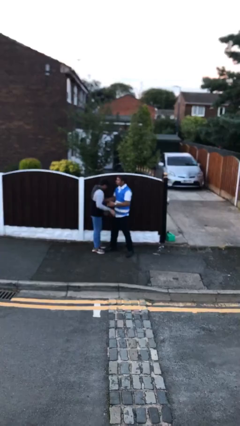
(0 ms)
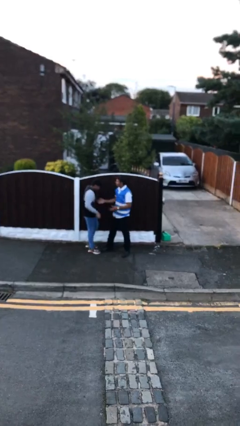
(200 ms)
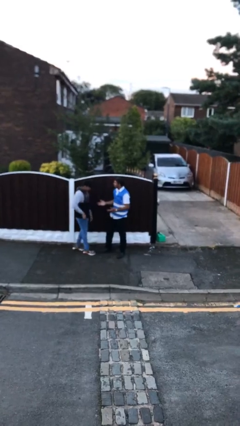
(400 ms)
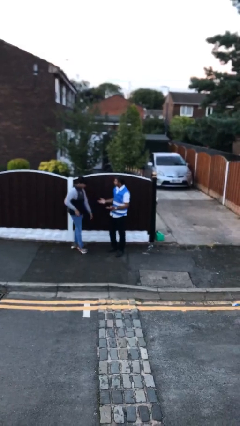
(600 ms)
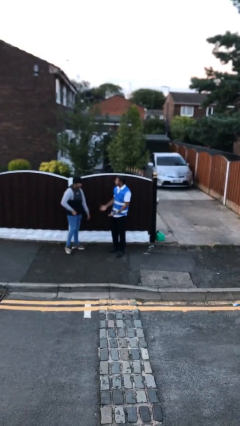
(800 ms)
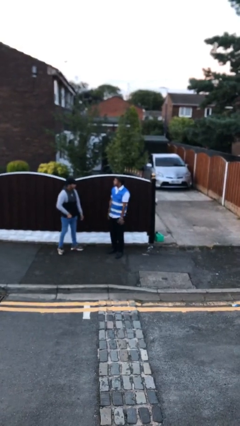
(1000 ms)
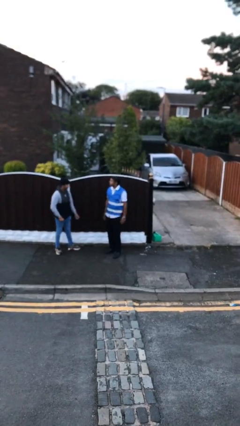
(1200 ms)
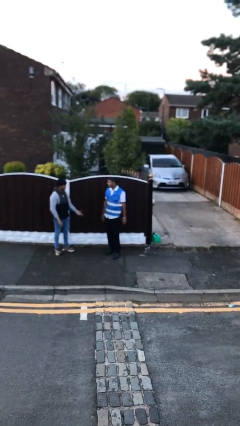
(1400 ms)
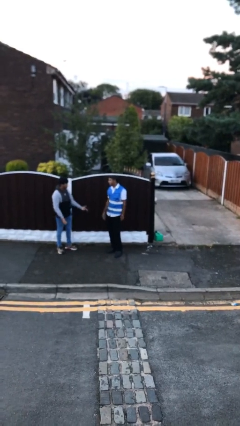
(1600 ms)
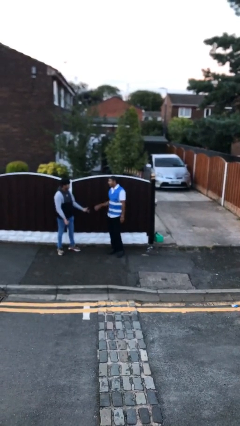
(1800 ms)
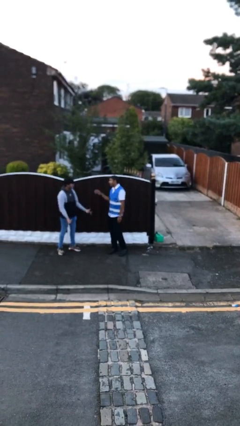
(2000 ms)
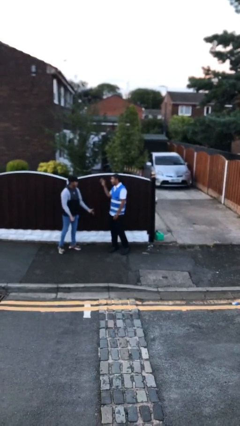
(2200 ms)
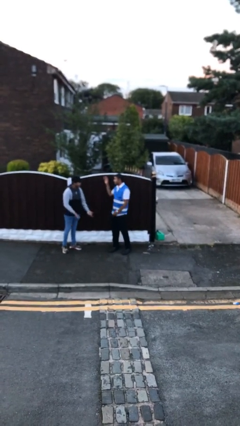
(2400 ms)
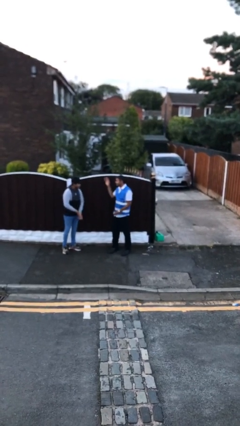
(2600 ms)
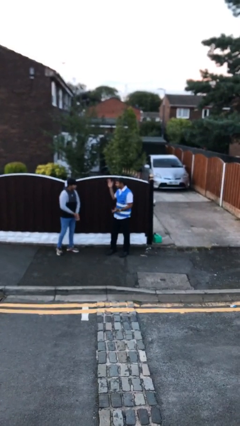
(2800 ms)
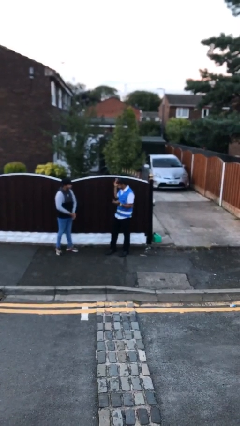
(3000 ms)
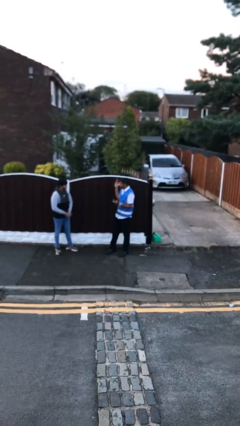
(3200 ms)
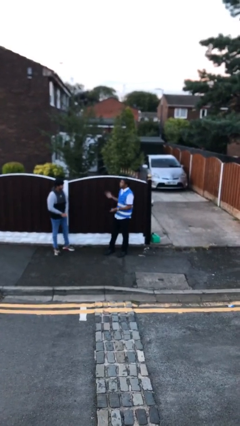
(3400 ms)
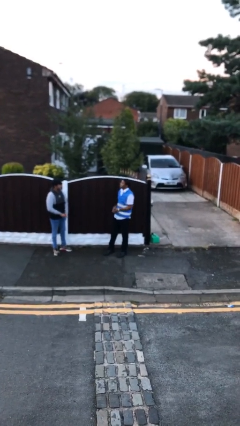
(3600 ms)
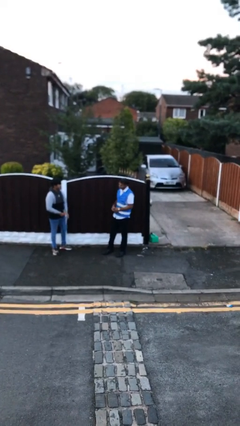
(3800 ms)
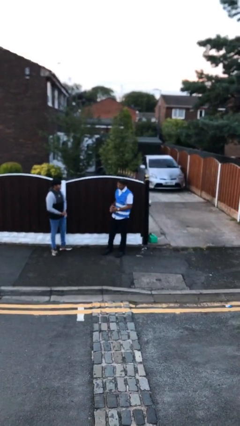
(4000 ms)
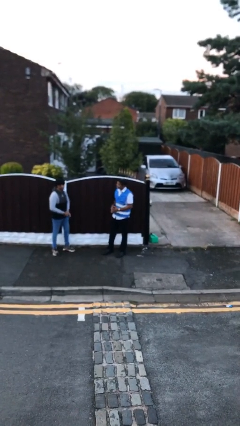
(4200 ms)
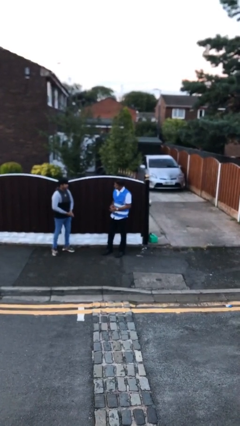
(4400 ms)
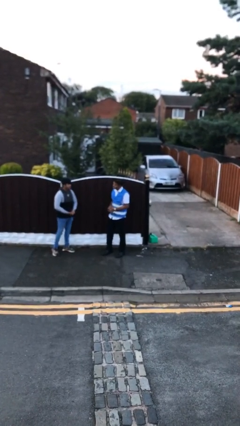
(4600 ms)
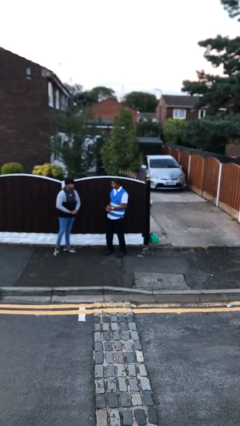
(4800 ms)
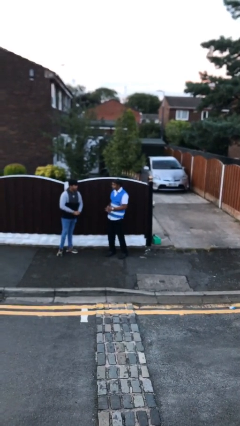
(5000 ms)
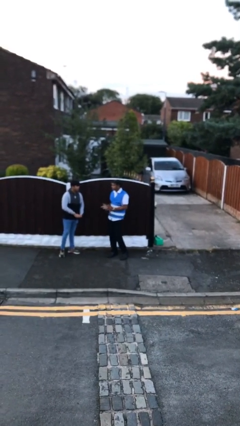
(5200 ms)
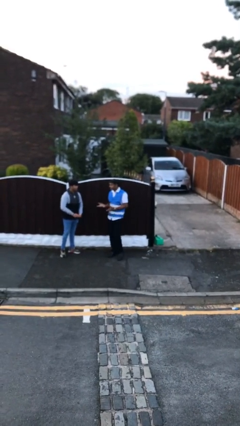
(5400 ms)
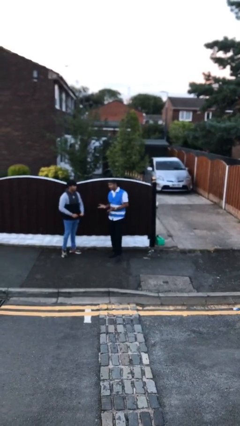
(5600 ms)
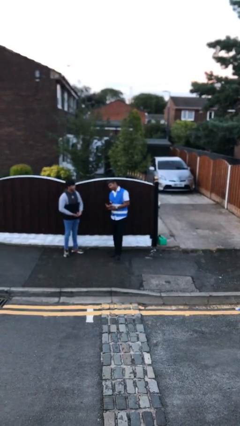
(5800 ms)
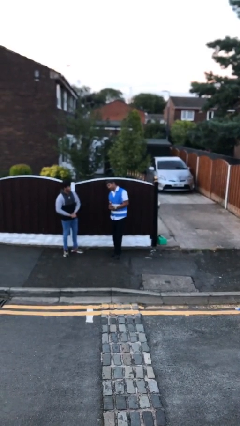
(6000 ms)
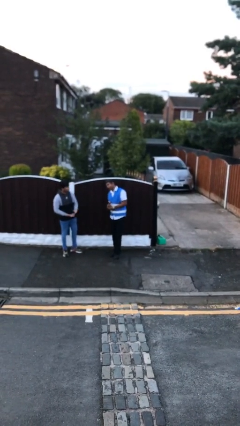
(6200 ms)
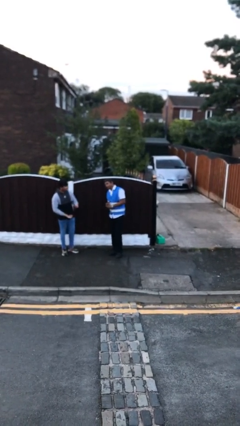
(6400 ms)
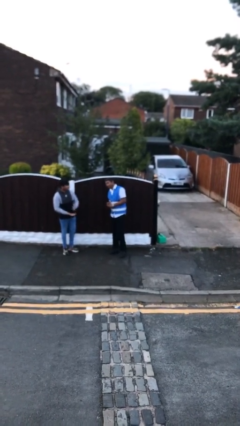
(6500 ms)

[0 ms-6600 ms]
person talks to person

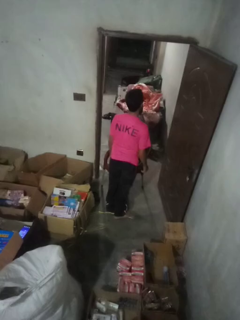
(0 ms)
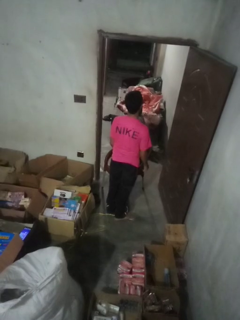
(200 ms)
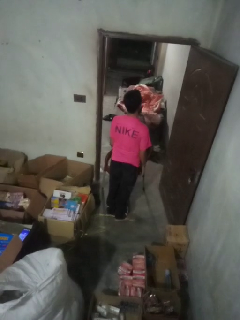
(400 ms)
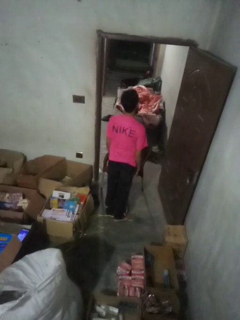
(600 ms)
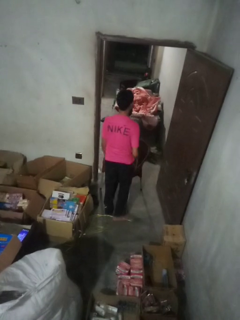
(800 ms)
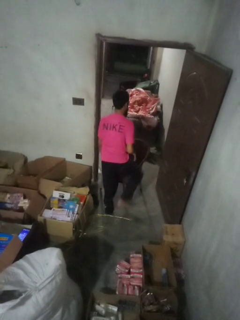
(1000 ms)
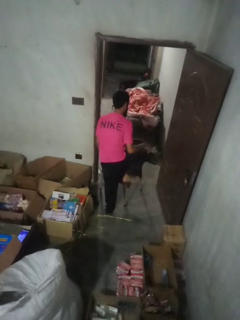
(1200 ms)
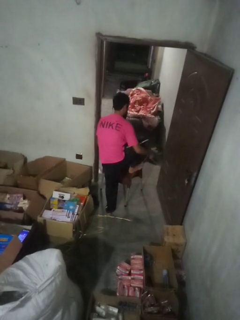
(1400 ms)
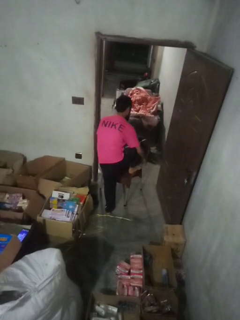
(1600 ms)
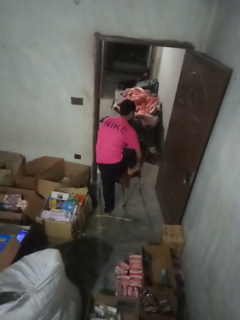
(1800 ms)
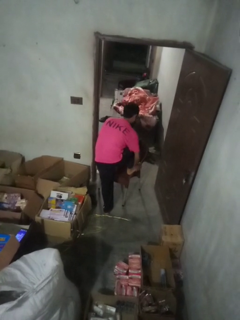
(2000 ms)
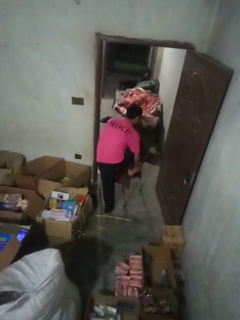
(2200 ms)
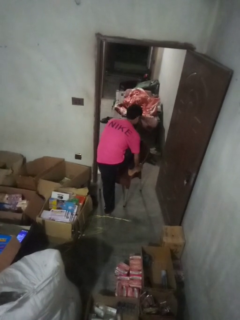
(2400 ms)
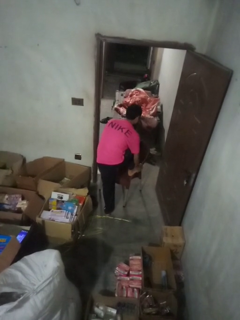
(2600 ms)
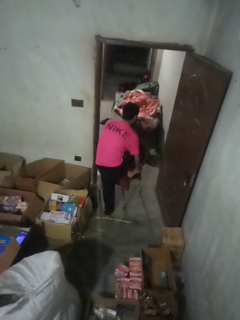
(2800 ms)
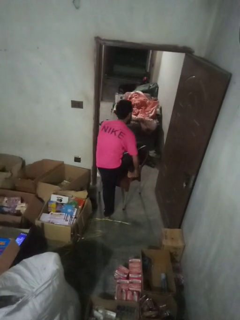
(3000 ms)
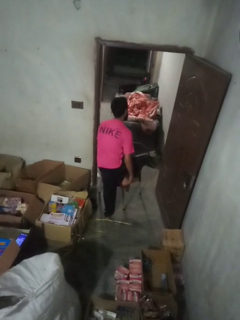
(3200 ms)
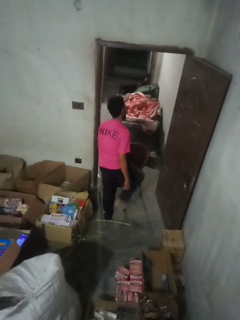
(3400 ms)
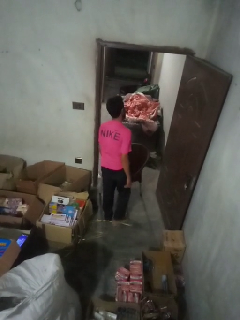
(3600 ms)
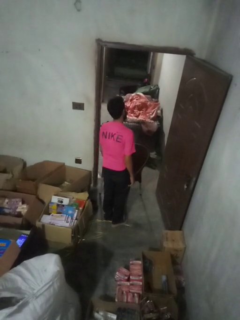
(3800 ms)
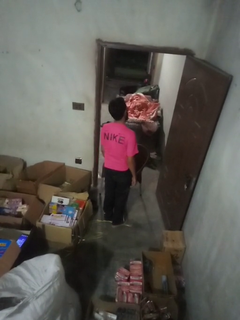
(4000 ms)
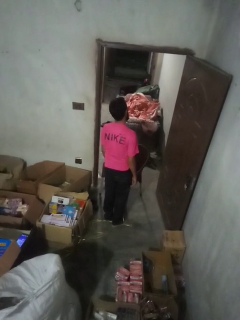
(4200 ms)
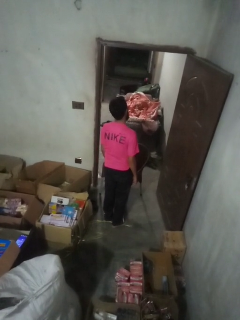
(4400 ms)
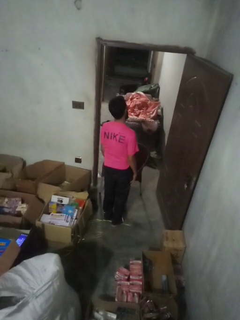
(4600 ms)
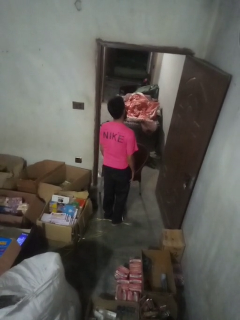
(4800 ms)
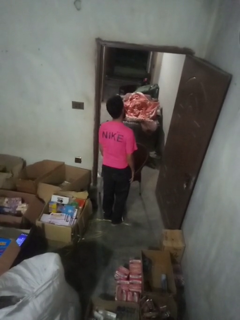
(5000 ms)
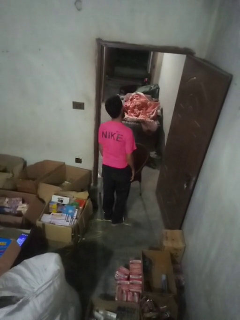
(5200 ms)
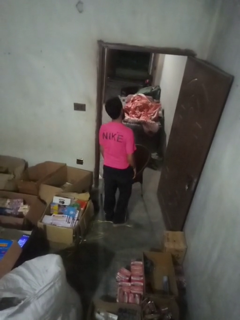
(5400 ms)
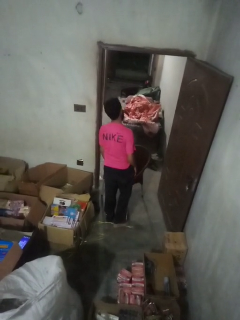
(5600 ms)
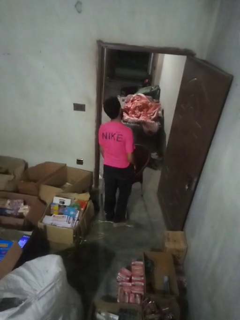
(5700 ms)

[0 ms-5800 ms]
person stubs toe

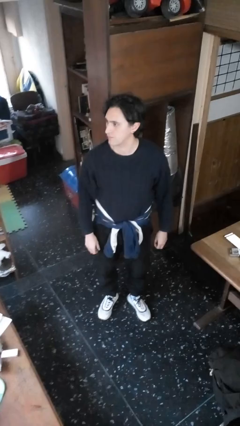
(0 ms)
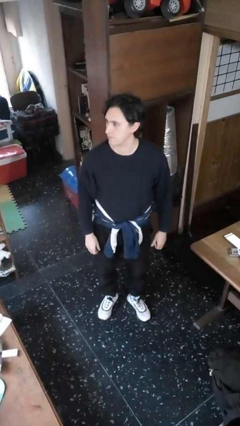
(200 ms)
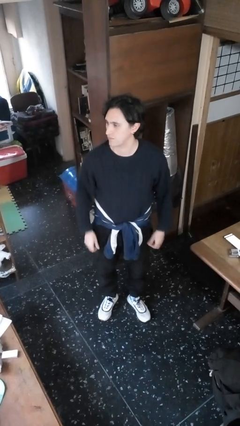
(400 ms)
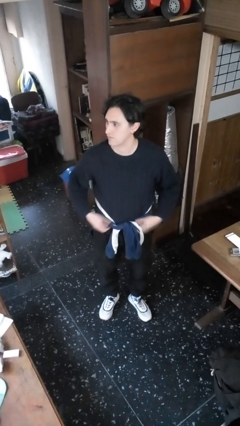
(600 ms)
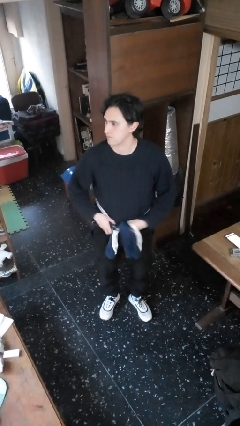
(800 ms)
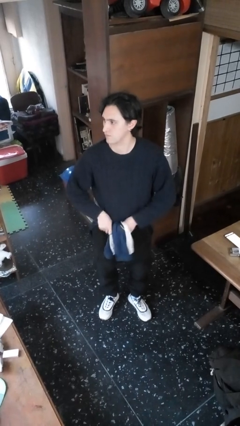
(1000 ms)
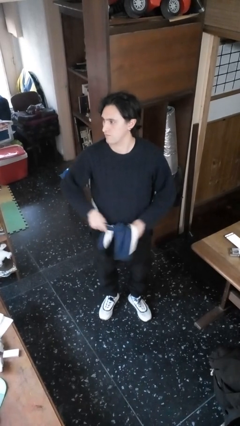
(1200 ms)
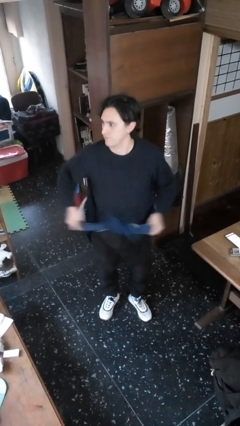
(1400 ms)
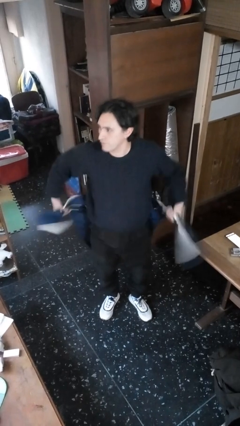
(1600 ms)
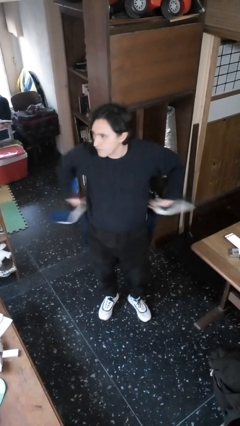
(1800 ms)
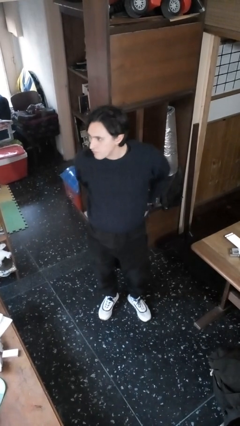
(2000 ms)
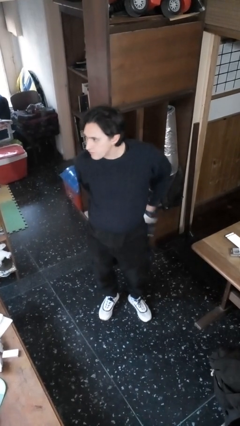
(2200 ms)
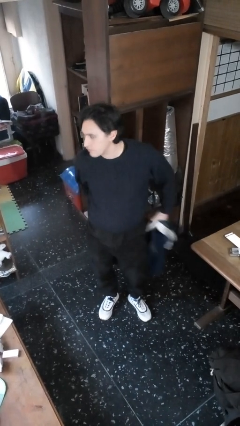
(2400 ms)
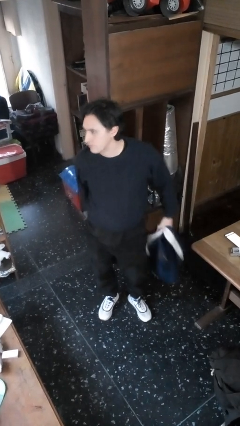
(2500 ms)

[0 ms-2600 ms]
person unties jacket around waist

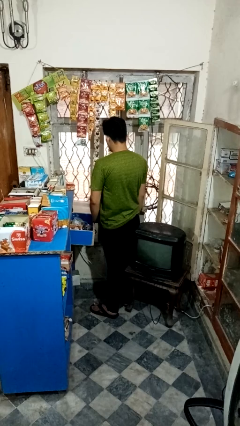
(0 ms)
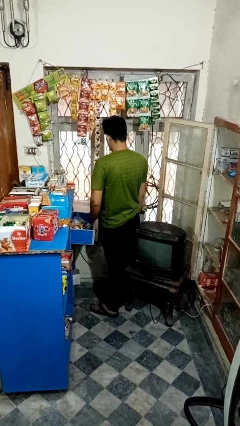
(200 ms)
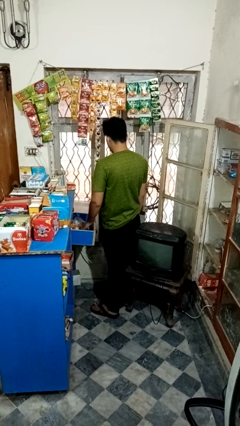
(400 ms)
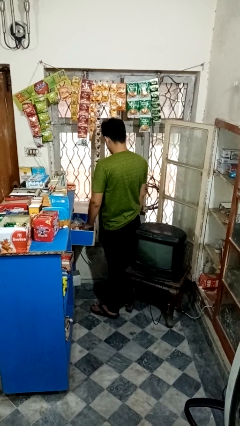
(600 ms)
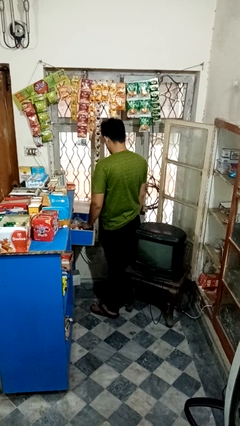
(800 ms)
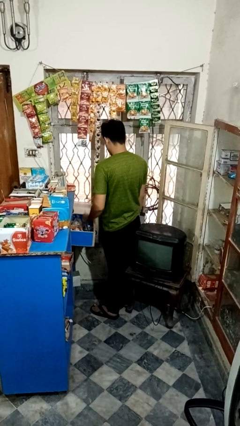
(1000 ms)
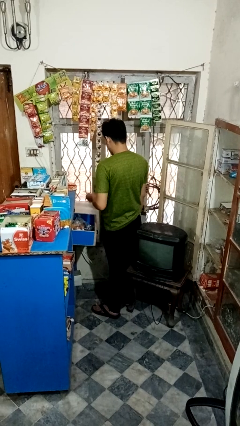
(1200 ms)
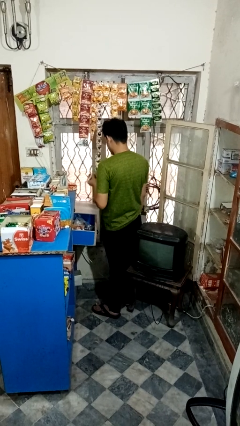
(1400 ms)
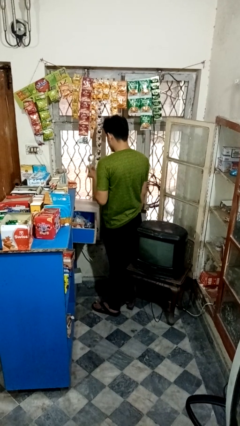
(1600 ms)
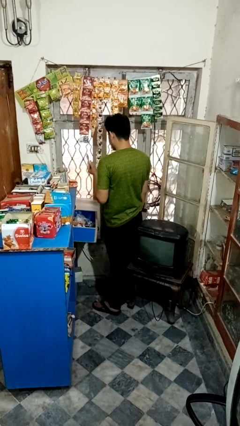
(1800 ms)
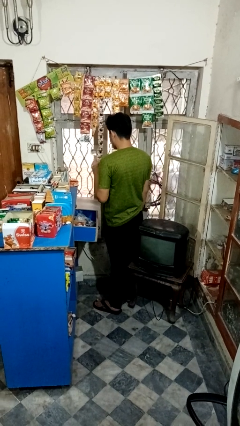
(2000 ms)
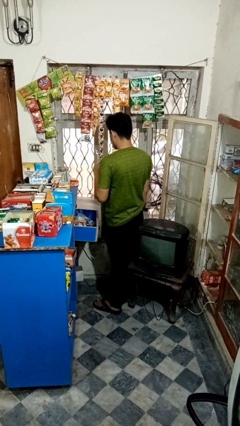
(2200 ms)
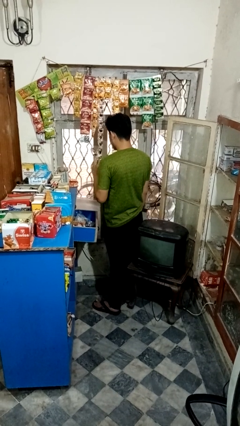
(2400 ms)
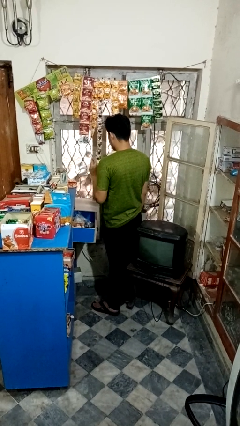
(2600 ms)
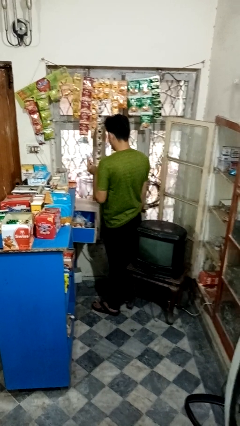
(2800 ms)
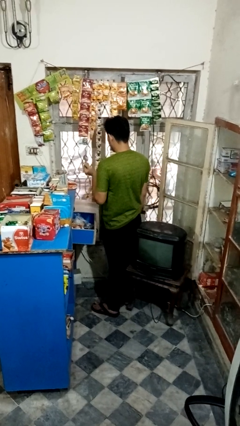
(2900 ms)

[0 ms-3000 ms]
person takes object from kitchen drawer

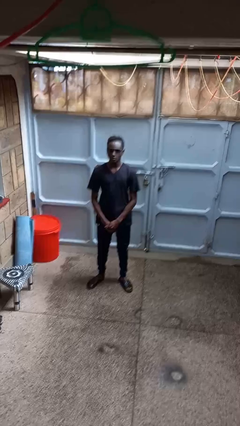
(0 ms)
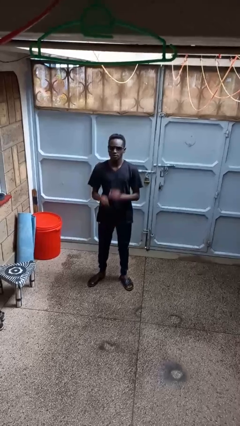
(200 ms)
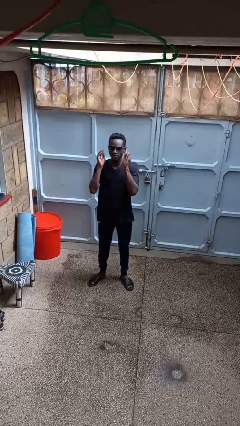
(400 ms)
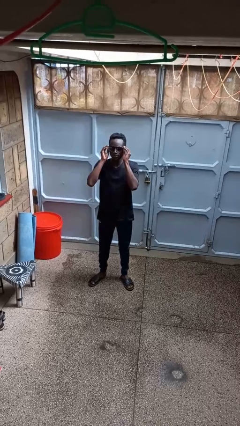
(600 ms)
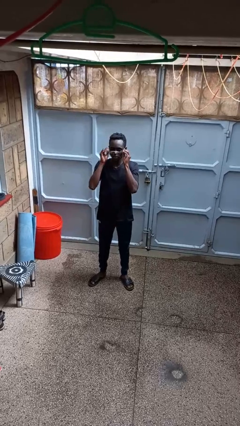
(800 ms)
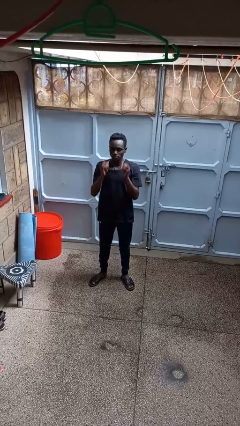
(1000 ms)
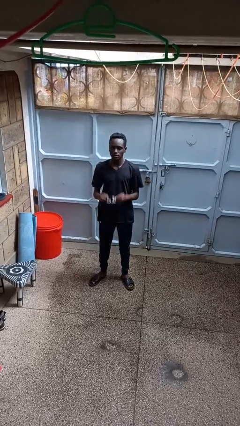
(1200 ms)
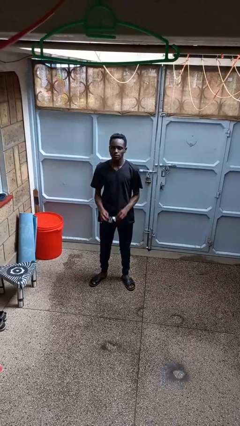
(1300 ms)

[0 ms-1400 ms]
person takes off sunglasses
